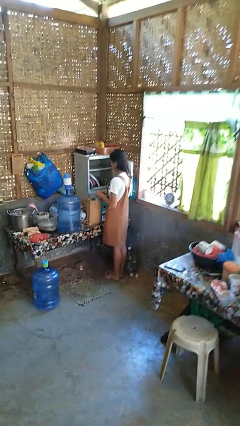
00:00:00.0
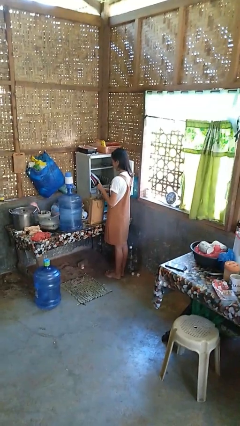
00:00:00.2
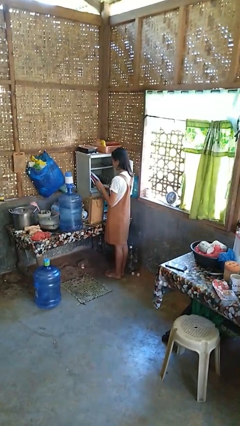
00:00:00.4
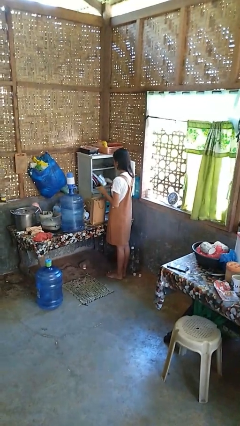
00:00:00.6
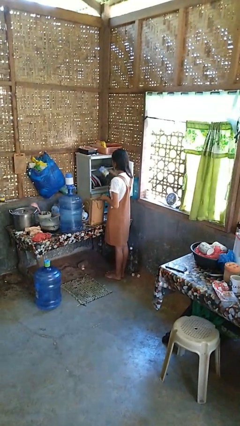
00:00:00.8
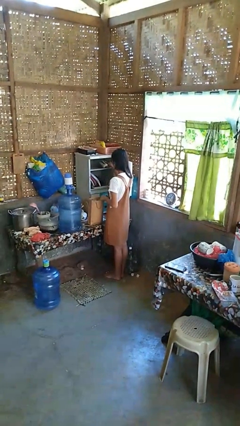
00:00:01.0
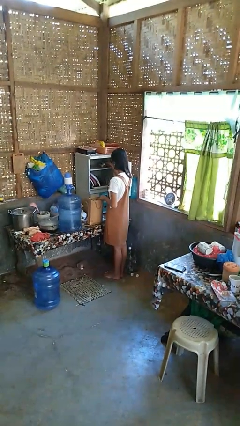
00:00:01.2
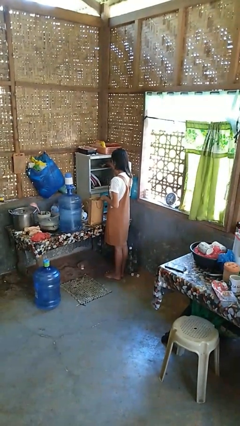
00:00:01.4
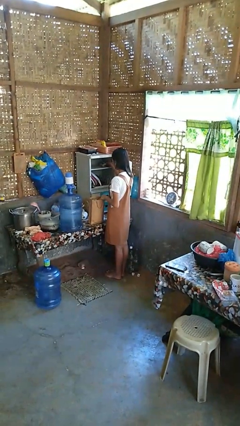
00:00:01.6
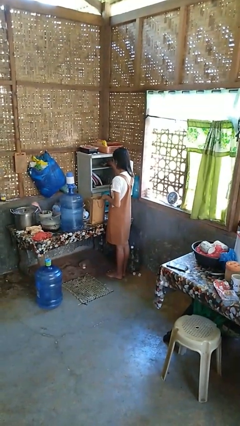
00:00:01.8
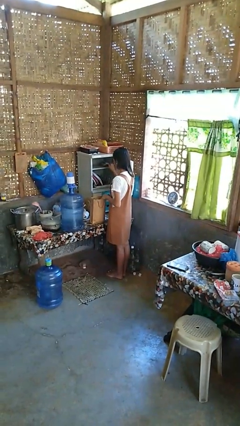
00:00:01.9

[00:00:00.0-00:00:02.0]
person loads groceries into cabinet

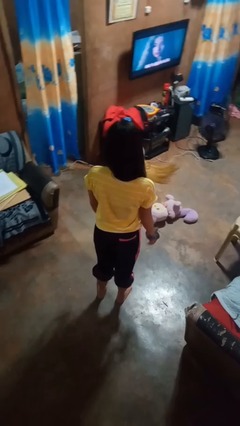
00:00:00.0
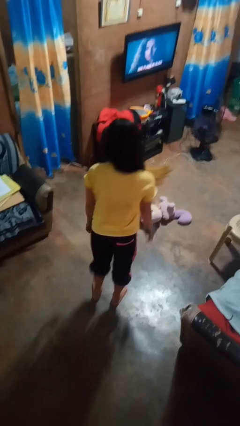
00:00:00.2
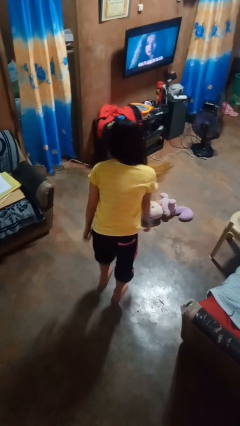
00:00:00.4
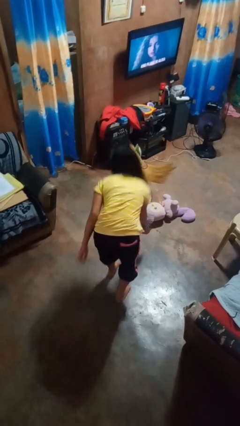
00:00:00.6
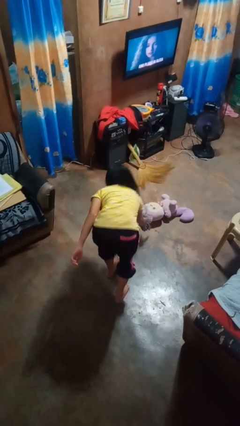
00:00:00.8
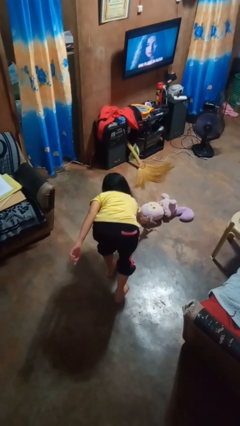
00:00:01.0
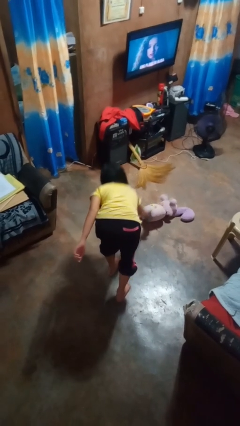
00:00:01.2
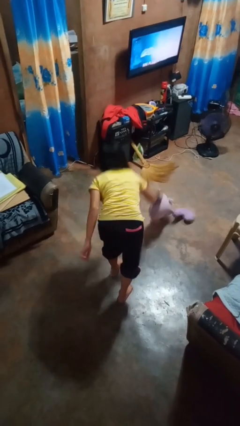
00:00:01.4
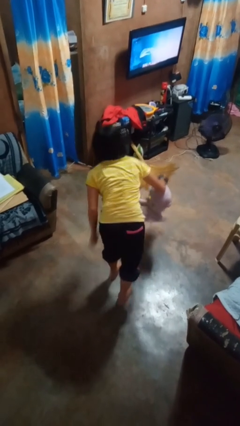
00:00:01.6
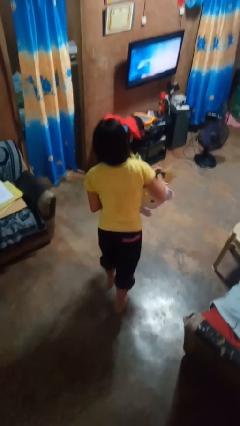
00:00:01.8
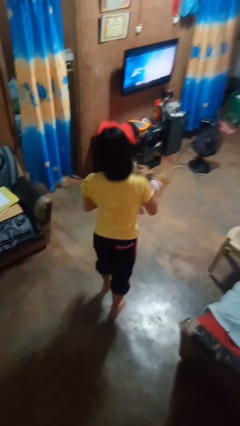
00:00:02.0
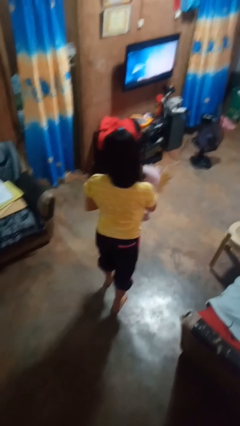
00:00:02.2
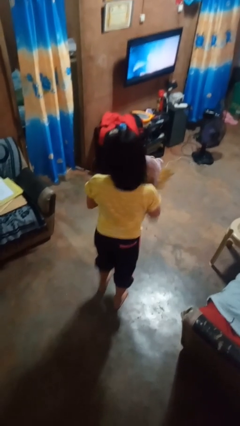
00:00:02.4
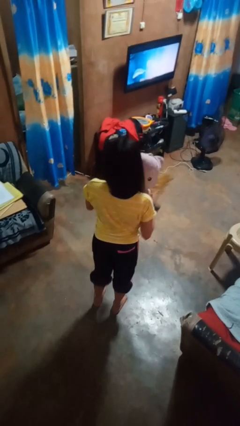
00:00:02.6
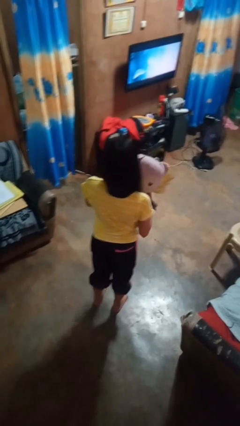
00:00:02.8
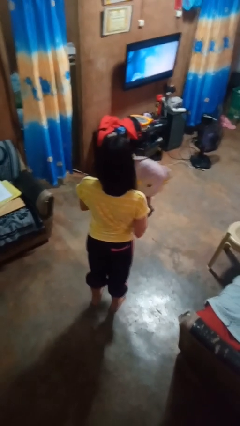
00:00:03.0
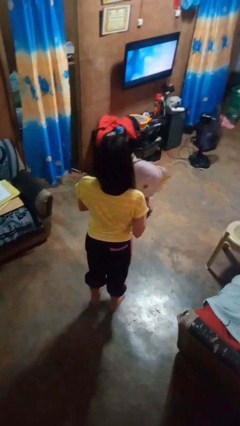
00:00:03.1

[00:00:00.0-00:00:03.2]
person picks up object from floor

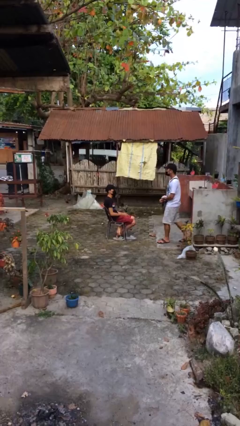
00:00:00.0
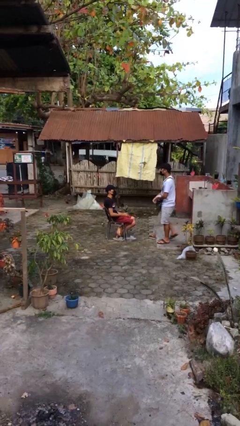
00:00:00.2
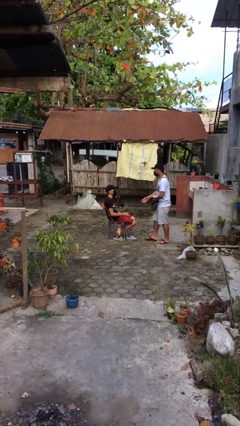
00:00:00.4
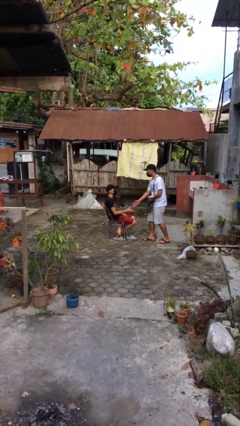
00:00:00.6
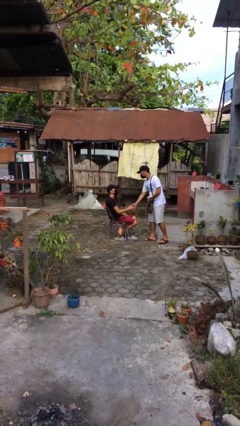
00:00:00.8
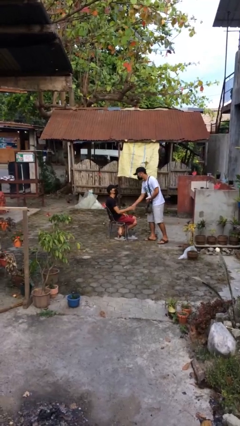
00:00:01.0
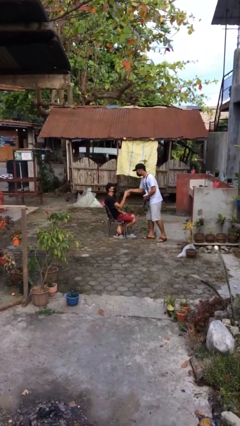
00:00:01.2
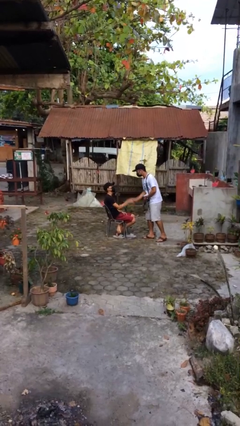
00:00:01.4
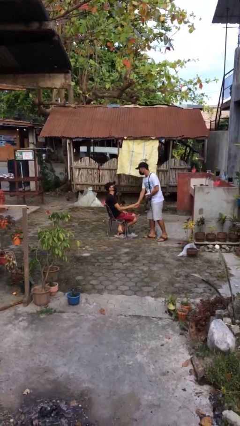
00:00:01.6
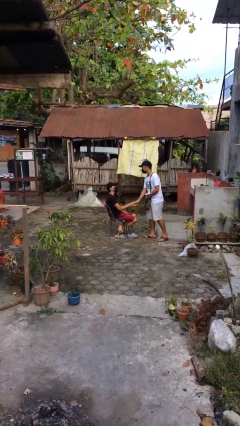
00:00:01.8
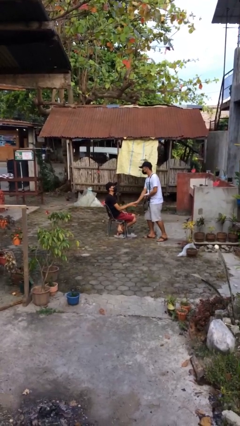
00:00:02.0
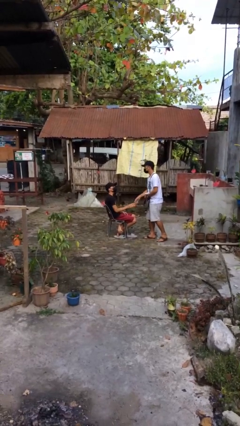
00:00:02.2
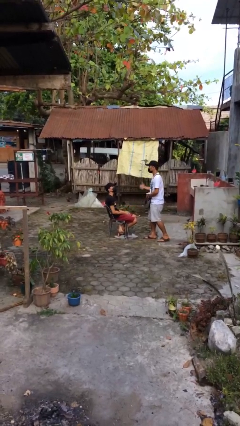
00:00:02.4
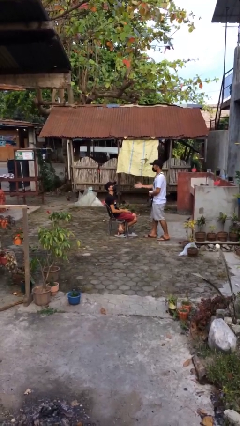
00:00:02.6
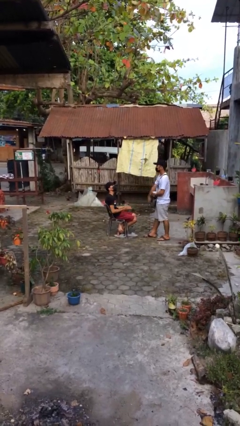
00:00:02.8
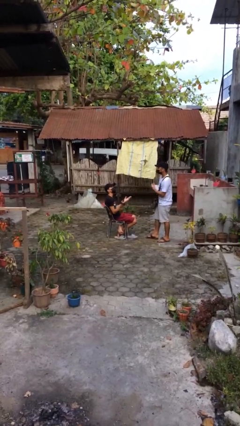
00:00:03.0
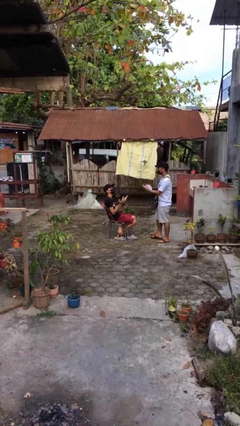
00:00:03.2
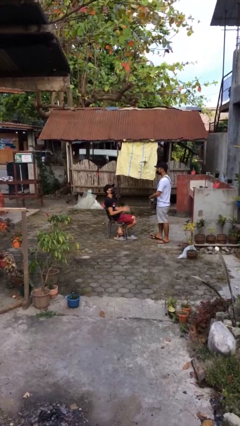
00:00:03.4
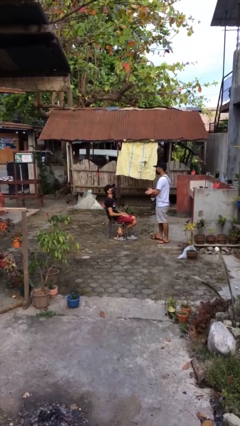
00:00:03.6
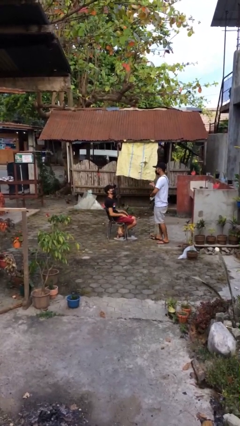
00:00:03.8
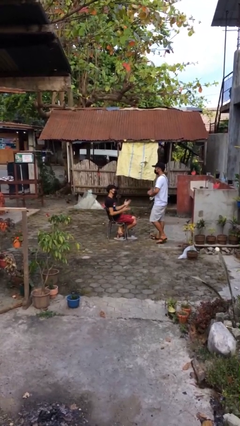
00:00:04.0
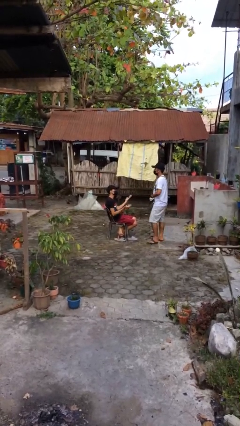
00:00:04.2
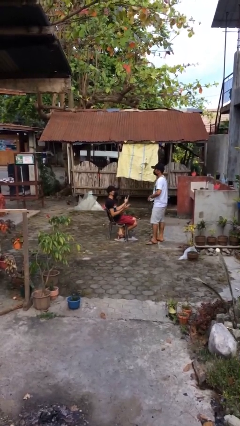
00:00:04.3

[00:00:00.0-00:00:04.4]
person shakes hand

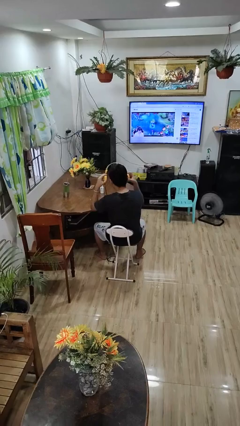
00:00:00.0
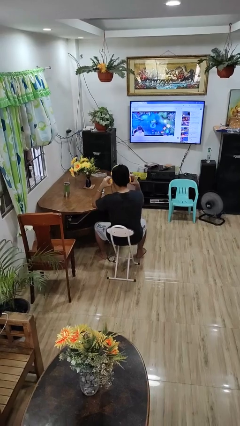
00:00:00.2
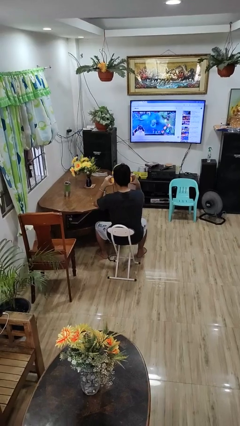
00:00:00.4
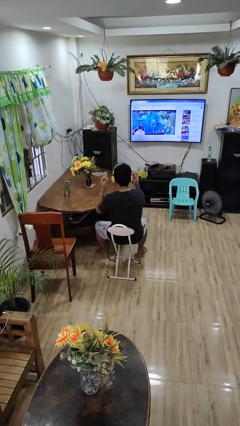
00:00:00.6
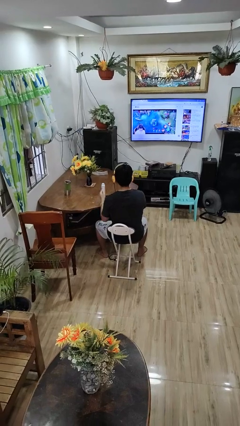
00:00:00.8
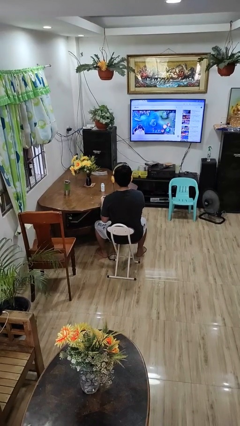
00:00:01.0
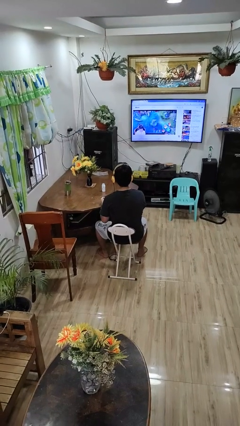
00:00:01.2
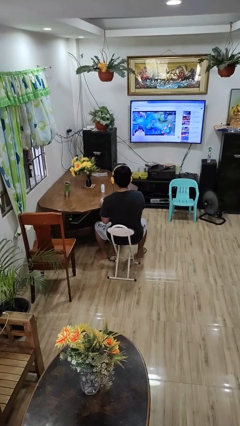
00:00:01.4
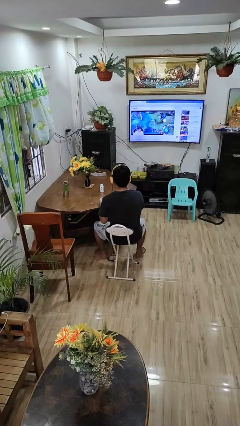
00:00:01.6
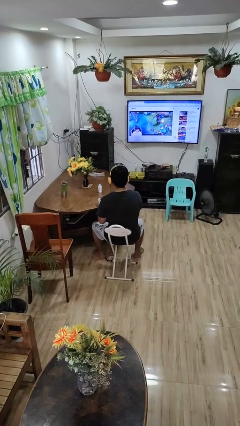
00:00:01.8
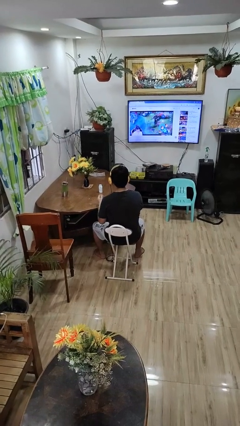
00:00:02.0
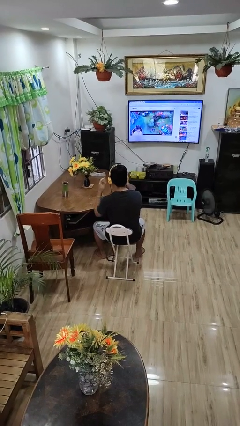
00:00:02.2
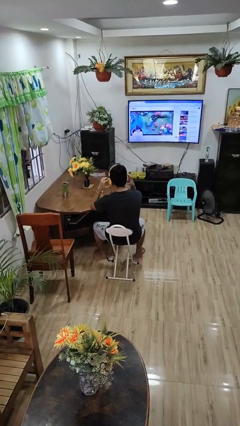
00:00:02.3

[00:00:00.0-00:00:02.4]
person puts on headphones

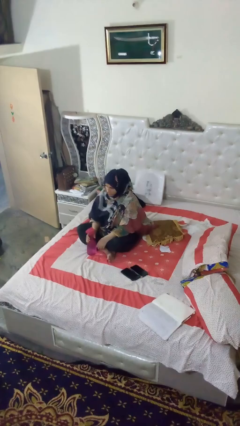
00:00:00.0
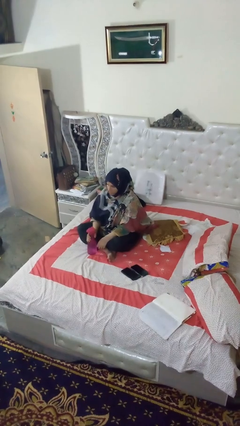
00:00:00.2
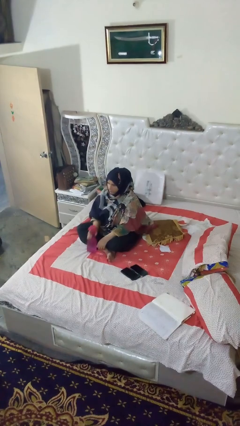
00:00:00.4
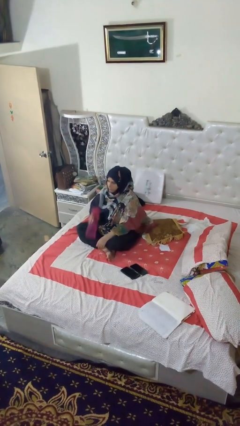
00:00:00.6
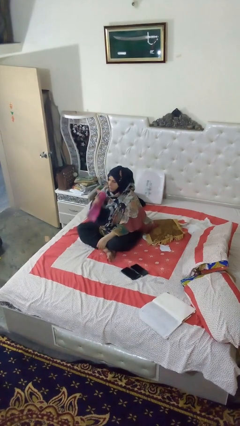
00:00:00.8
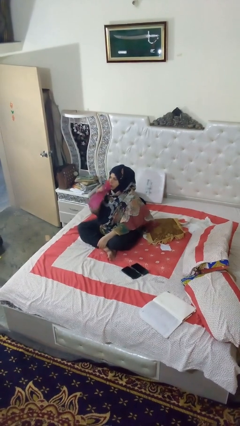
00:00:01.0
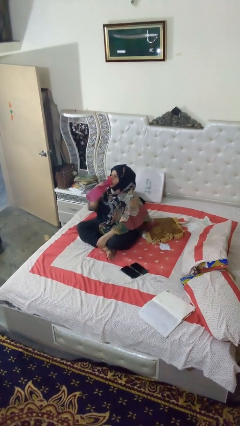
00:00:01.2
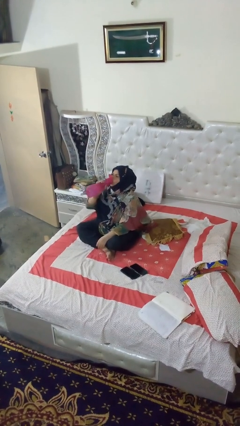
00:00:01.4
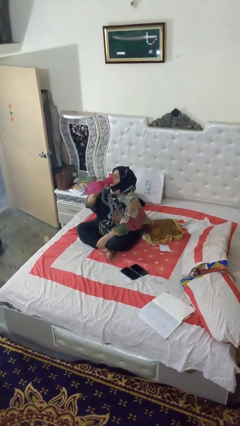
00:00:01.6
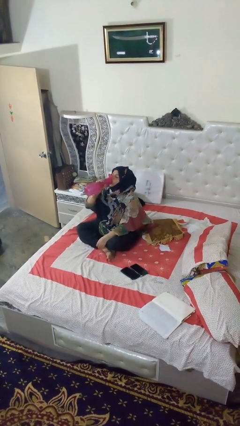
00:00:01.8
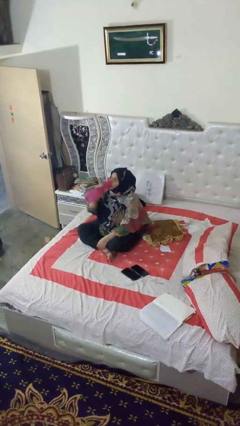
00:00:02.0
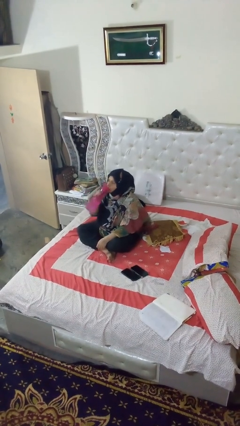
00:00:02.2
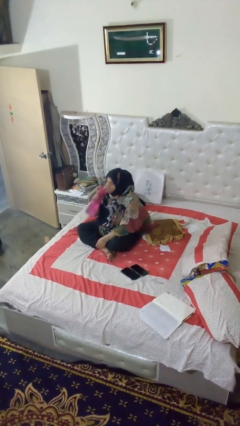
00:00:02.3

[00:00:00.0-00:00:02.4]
person drinks from bottle

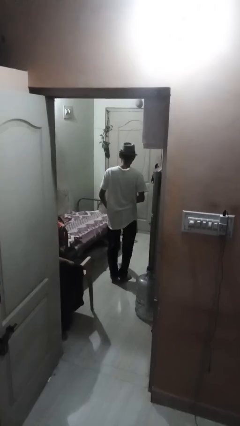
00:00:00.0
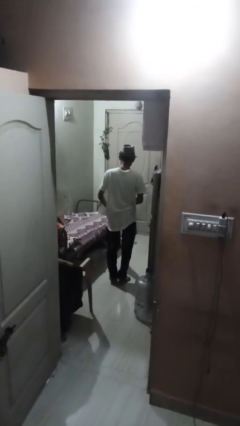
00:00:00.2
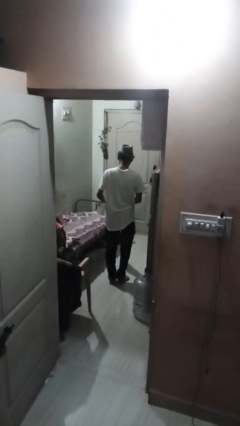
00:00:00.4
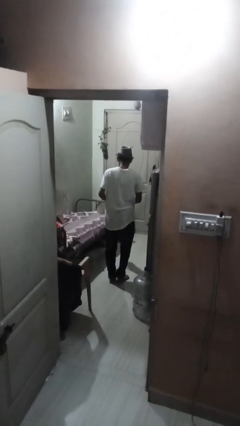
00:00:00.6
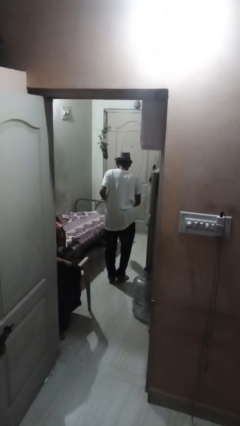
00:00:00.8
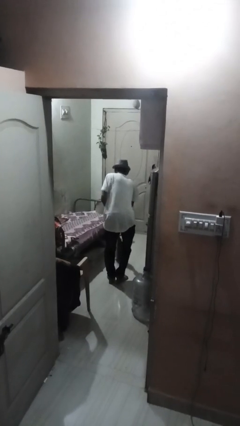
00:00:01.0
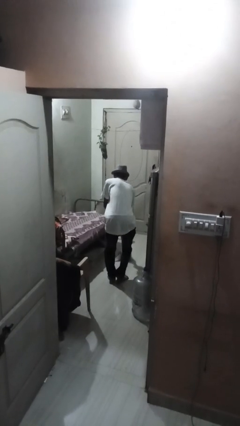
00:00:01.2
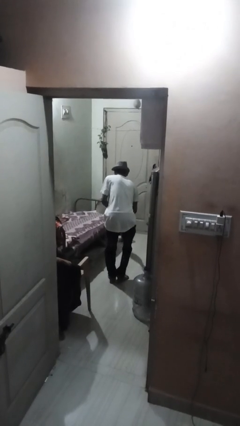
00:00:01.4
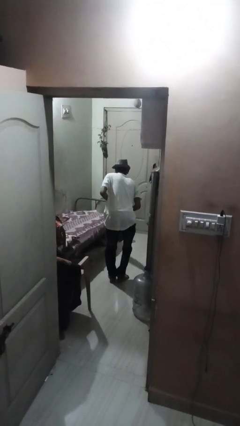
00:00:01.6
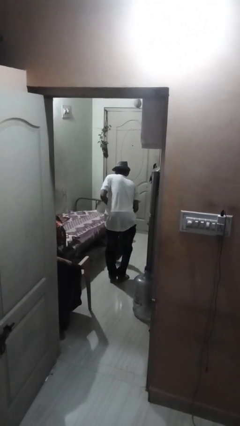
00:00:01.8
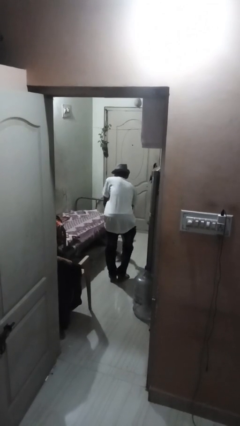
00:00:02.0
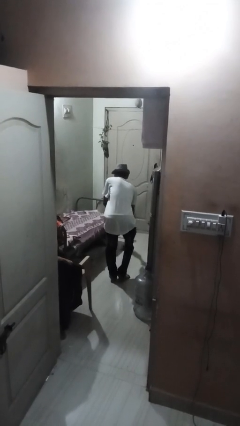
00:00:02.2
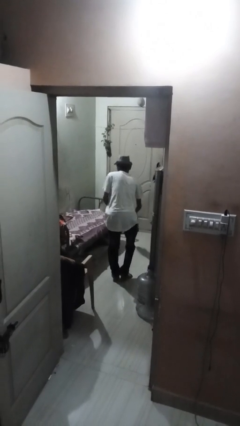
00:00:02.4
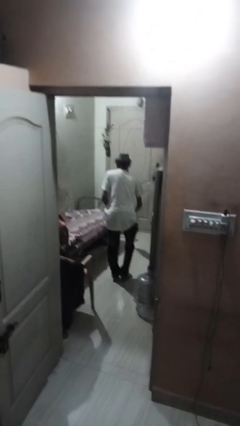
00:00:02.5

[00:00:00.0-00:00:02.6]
person mops
